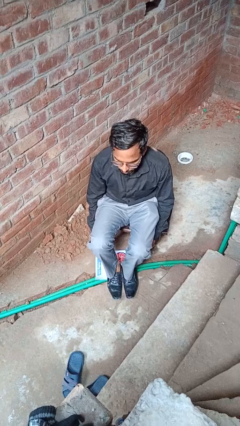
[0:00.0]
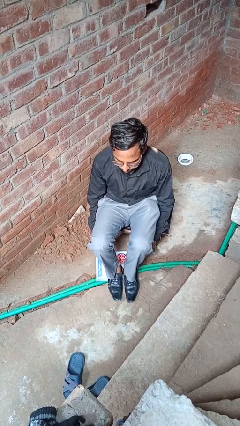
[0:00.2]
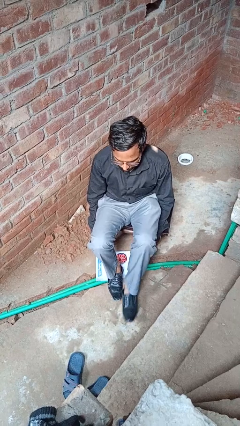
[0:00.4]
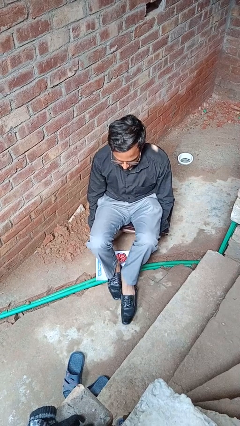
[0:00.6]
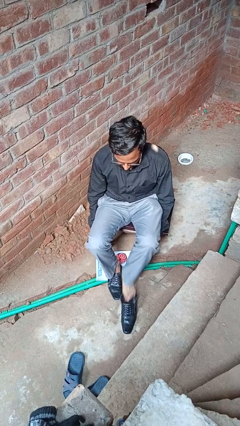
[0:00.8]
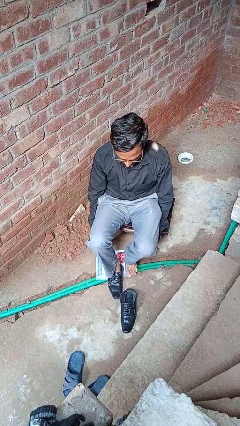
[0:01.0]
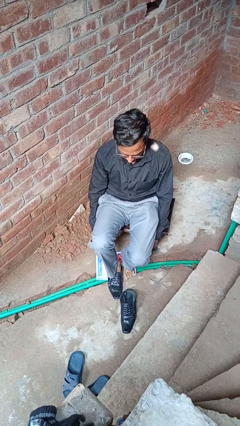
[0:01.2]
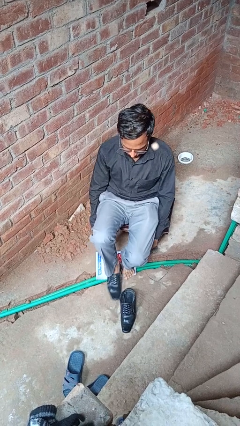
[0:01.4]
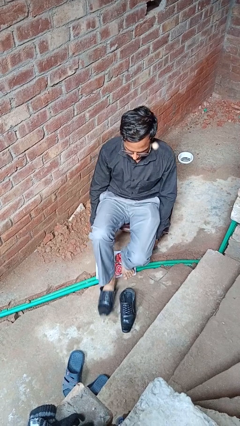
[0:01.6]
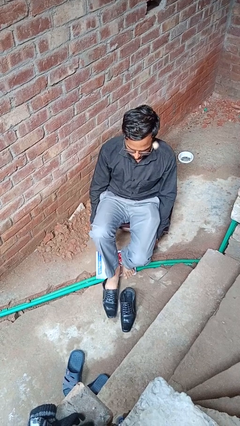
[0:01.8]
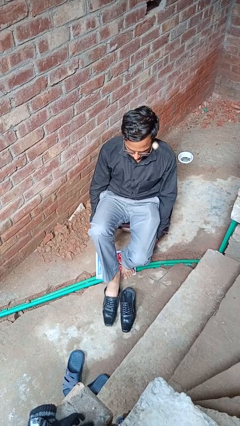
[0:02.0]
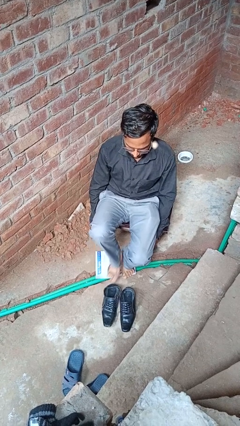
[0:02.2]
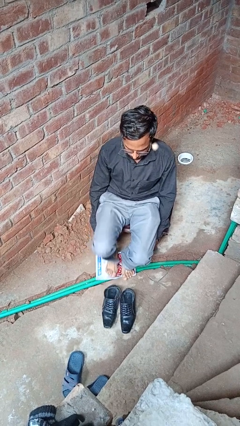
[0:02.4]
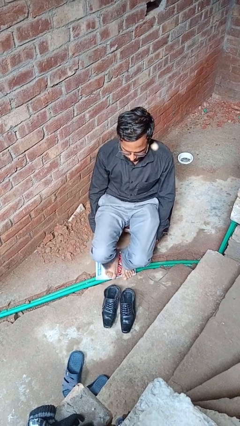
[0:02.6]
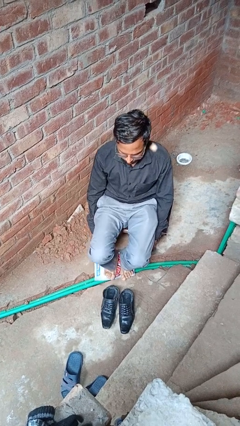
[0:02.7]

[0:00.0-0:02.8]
person takes off shoes

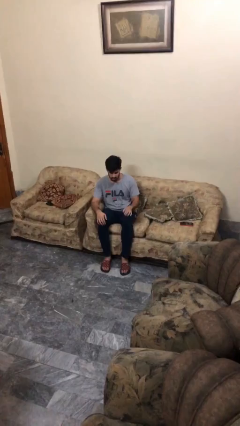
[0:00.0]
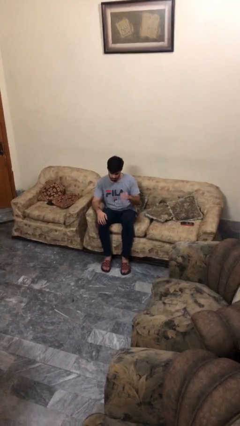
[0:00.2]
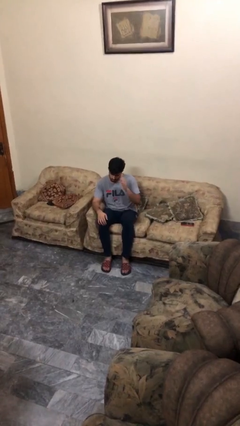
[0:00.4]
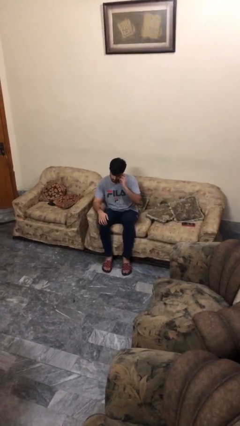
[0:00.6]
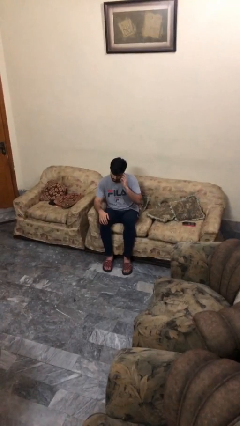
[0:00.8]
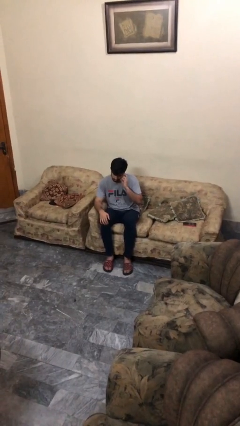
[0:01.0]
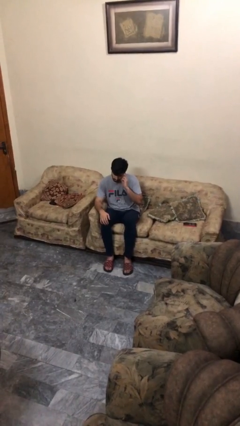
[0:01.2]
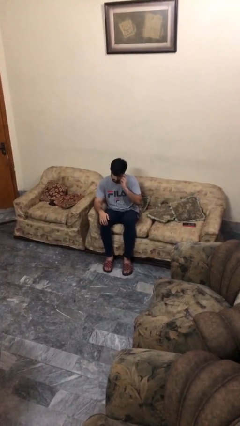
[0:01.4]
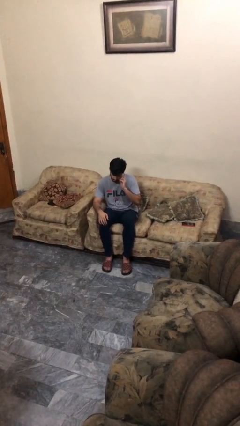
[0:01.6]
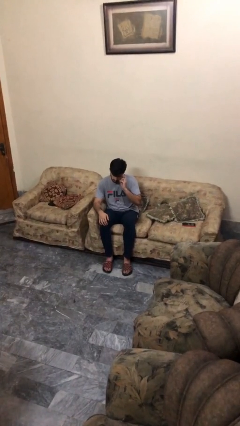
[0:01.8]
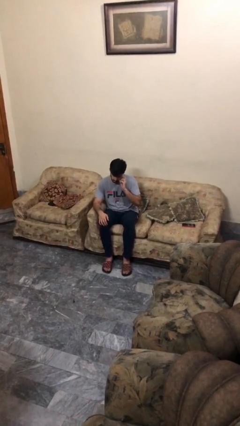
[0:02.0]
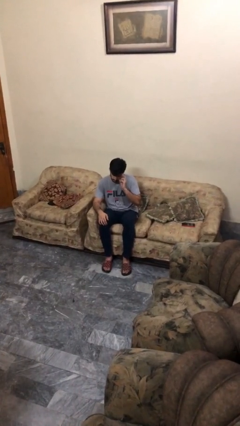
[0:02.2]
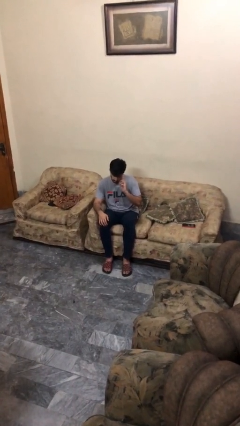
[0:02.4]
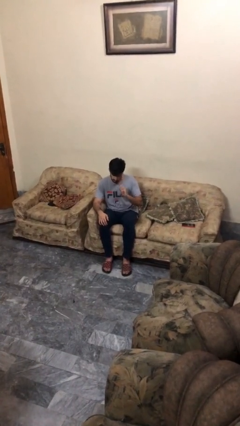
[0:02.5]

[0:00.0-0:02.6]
person scratches face

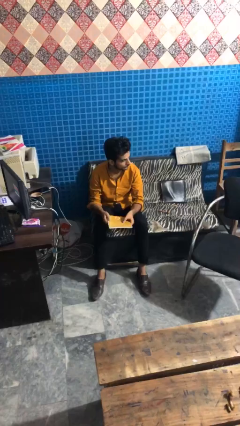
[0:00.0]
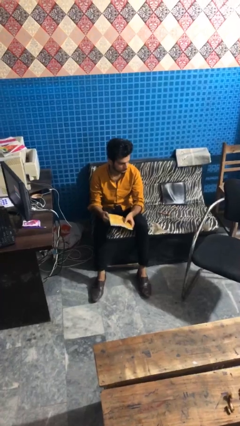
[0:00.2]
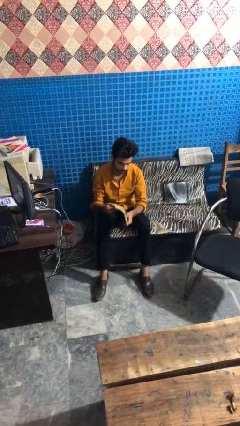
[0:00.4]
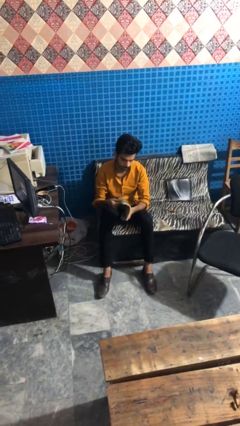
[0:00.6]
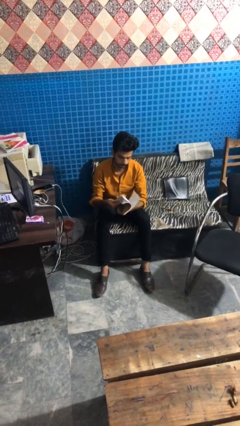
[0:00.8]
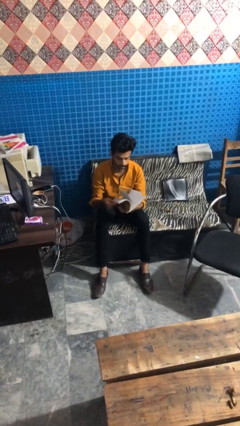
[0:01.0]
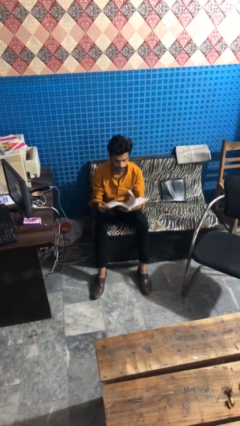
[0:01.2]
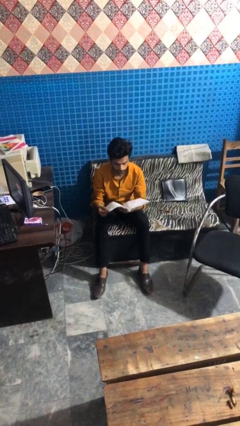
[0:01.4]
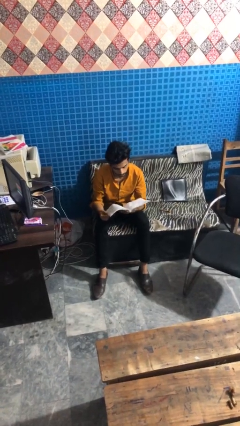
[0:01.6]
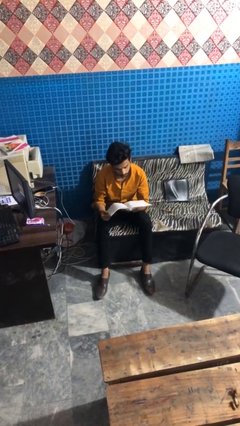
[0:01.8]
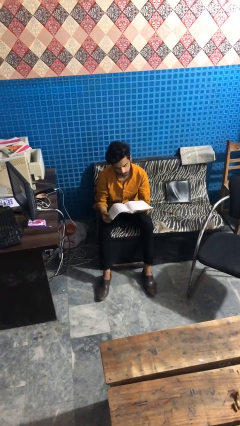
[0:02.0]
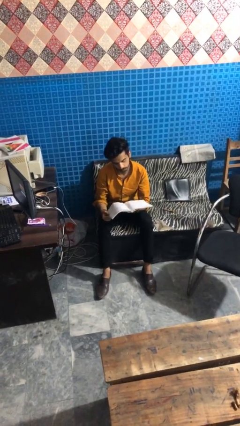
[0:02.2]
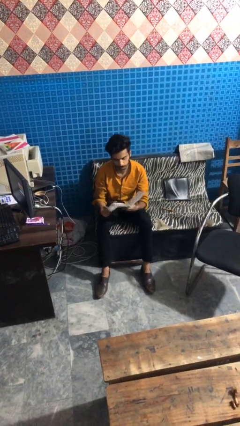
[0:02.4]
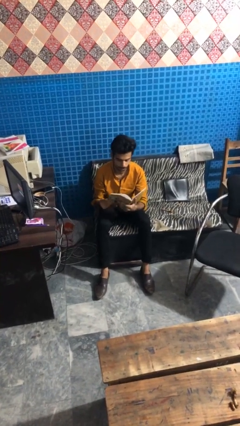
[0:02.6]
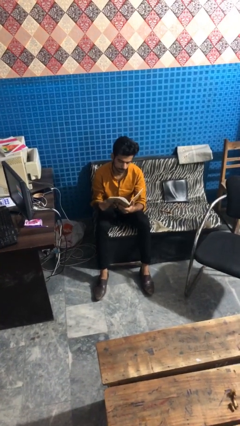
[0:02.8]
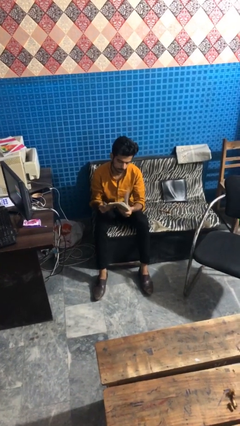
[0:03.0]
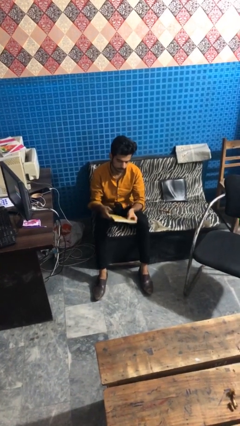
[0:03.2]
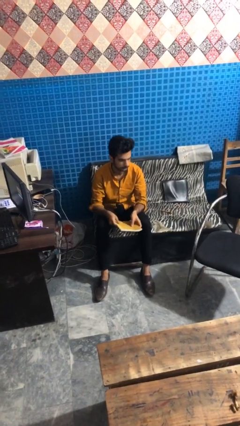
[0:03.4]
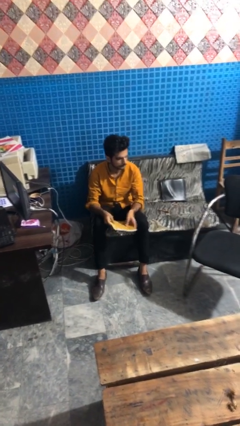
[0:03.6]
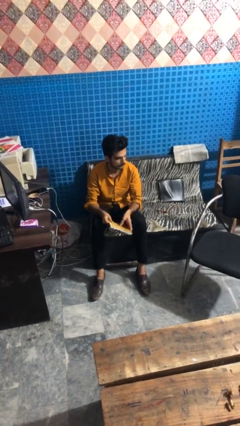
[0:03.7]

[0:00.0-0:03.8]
person reads magazine

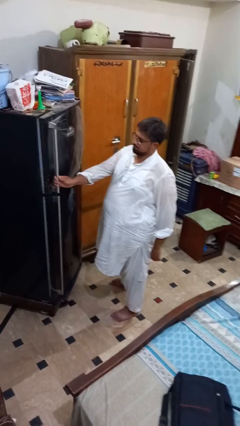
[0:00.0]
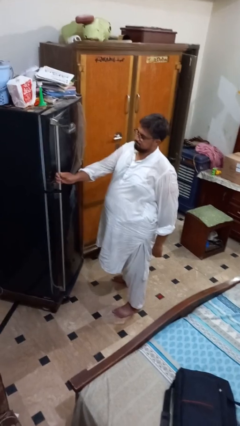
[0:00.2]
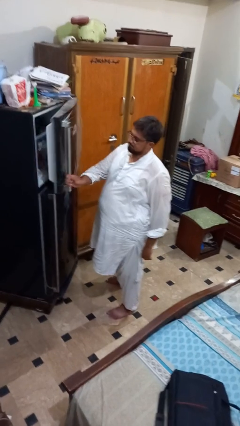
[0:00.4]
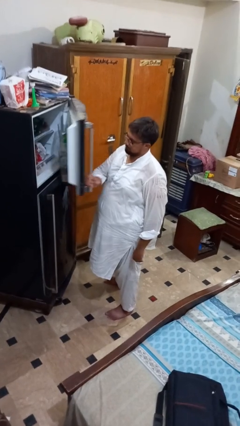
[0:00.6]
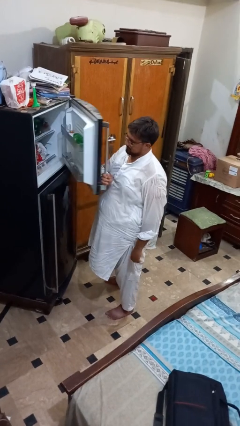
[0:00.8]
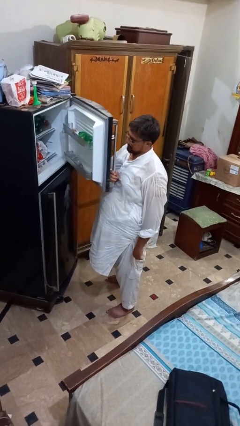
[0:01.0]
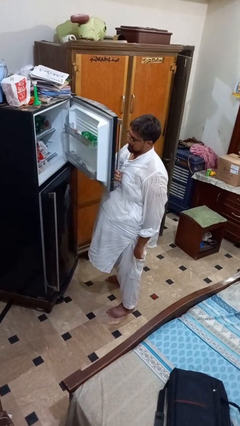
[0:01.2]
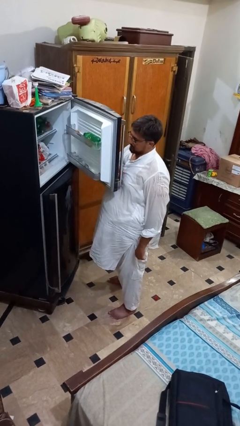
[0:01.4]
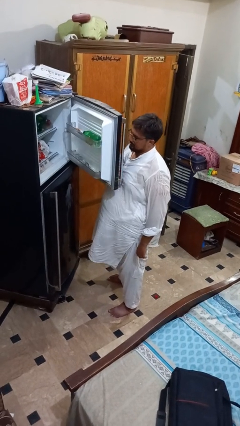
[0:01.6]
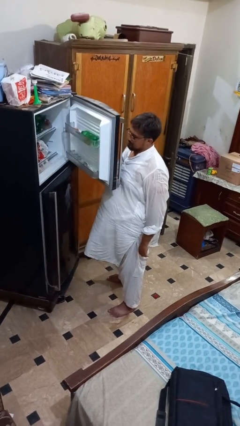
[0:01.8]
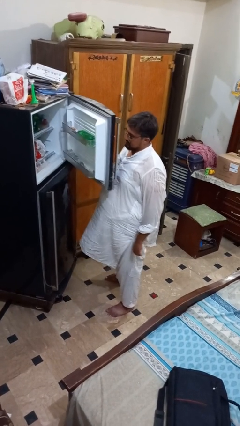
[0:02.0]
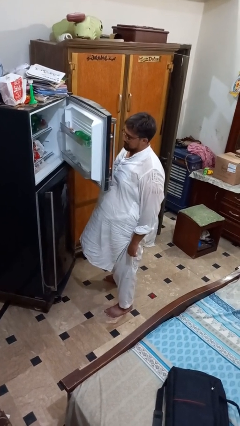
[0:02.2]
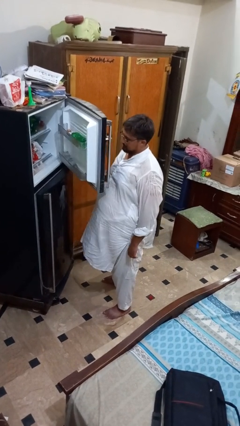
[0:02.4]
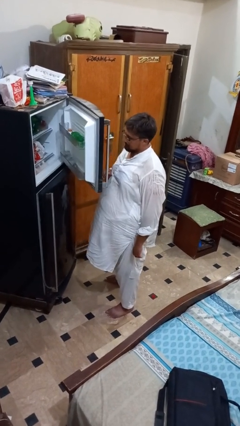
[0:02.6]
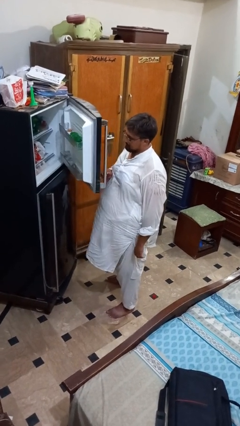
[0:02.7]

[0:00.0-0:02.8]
person opens refrigerator

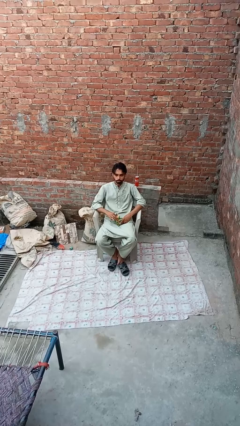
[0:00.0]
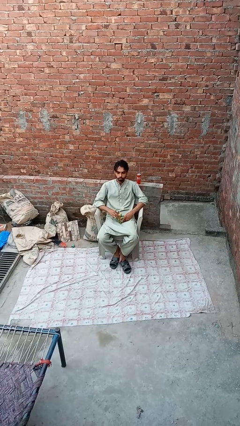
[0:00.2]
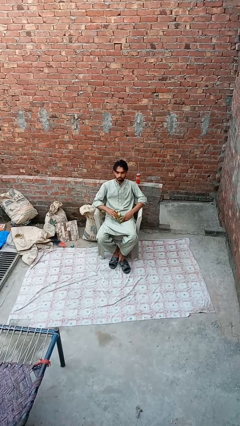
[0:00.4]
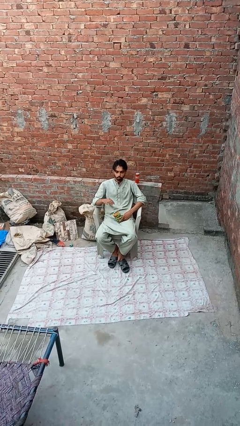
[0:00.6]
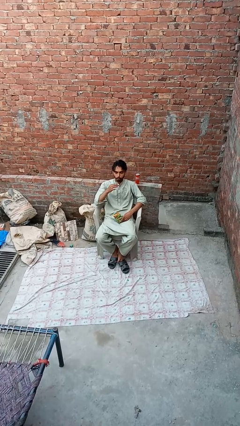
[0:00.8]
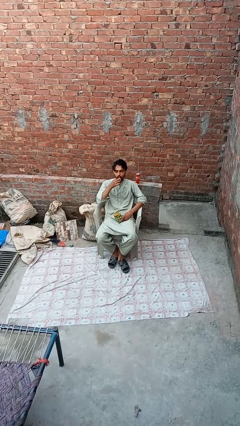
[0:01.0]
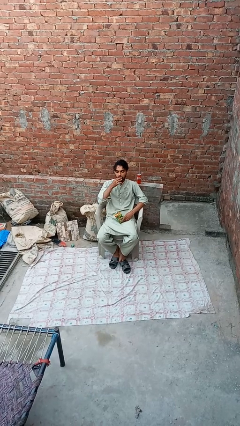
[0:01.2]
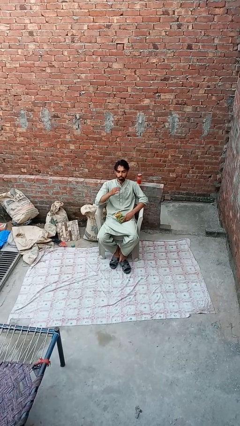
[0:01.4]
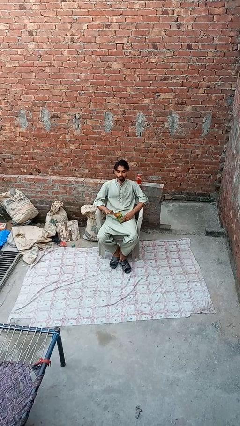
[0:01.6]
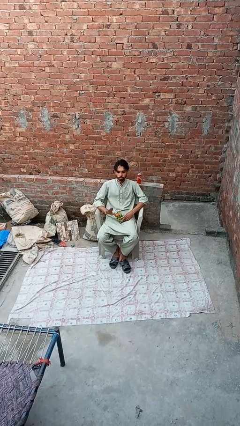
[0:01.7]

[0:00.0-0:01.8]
person eats snack from bag

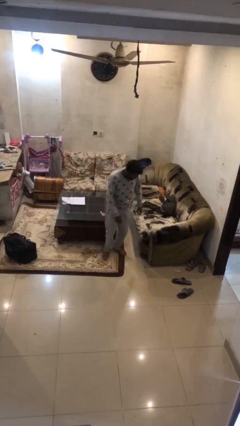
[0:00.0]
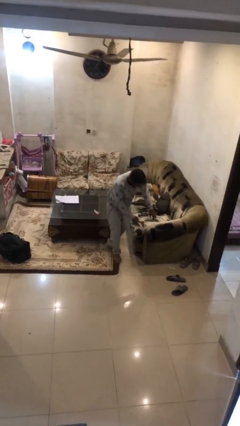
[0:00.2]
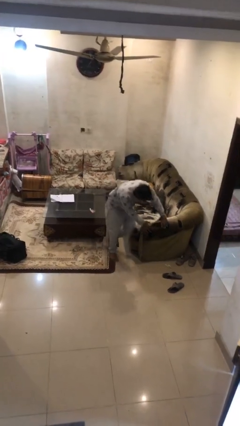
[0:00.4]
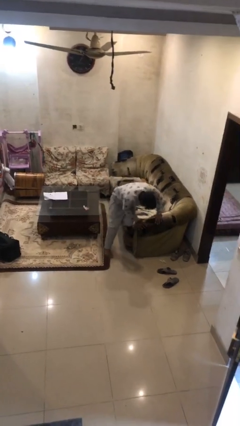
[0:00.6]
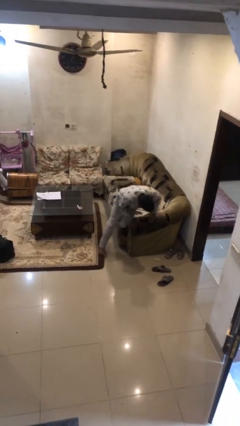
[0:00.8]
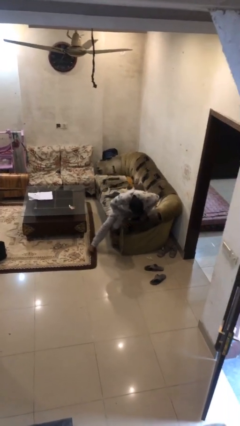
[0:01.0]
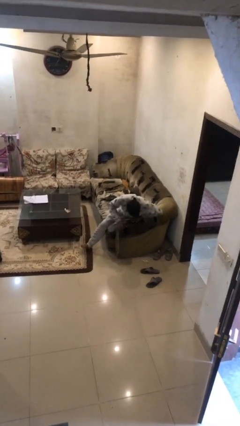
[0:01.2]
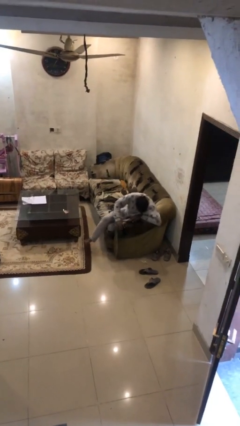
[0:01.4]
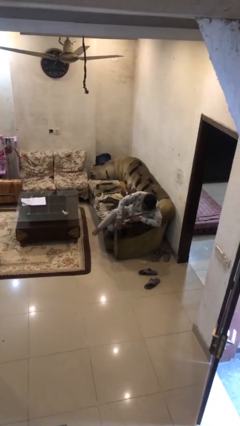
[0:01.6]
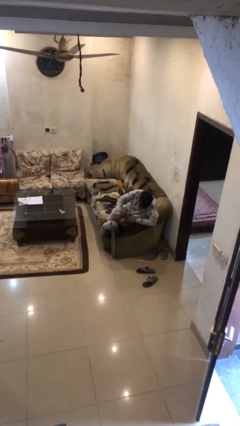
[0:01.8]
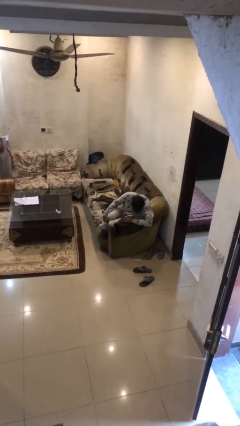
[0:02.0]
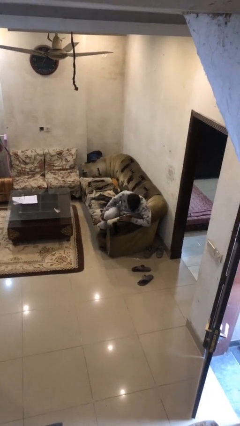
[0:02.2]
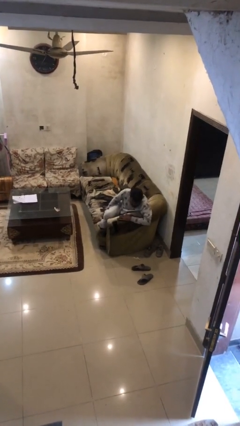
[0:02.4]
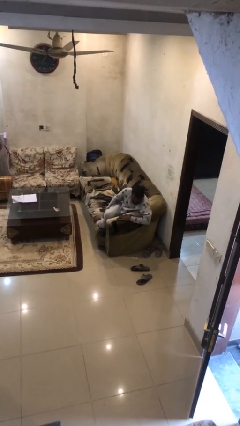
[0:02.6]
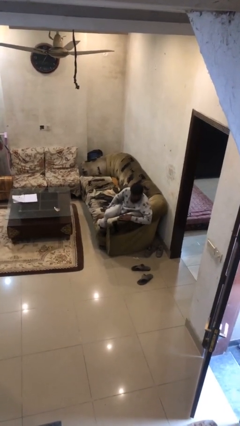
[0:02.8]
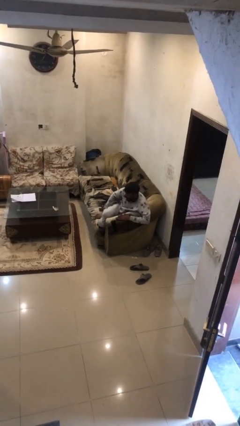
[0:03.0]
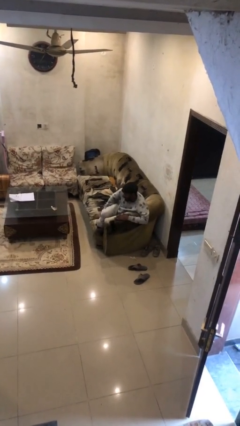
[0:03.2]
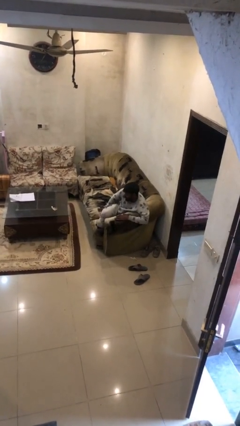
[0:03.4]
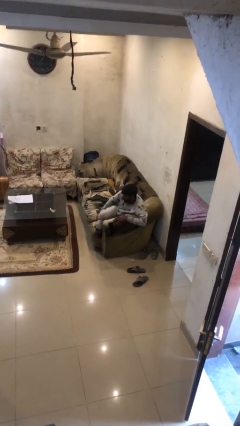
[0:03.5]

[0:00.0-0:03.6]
person sits down
